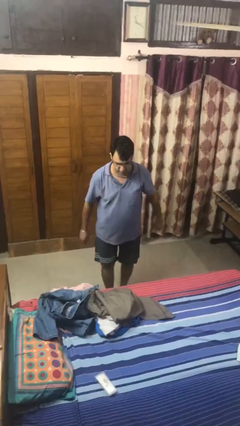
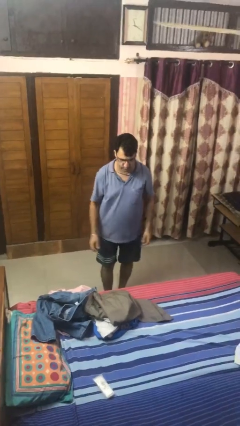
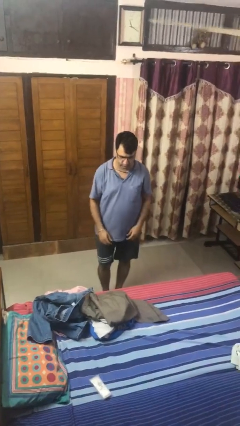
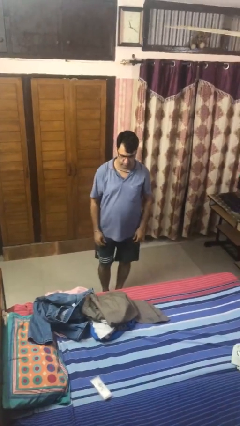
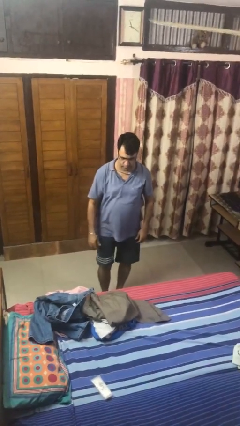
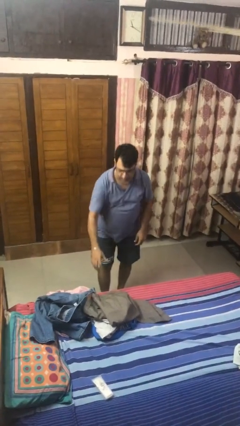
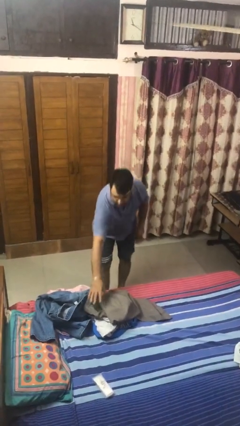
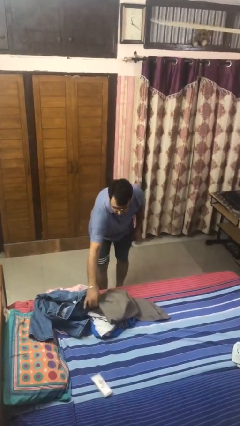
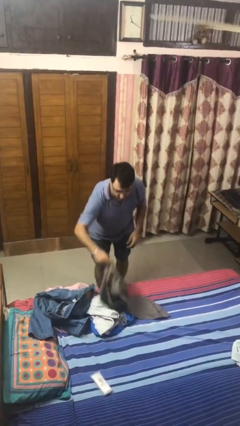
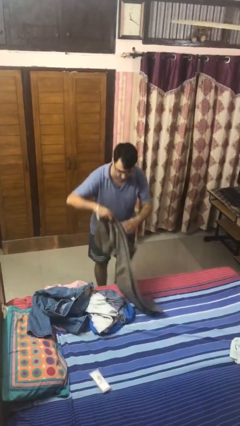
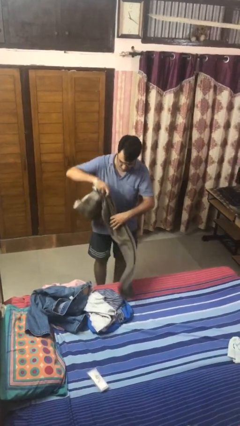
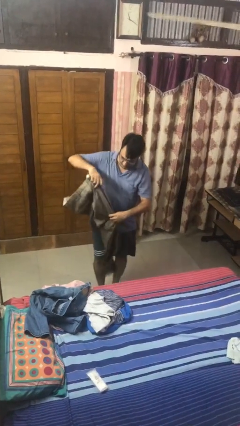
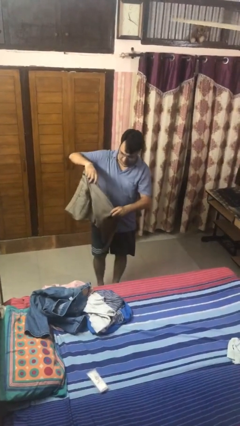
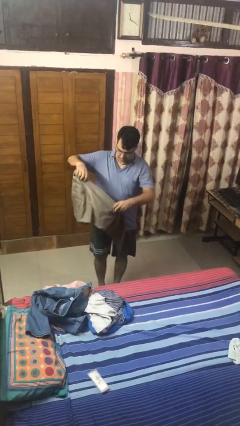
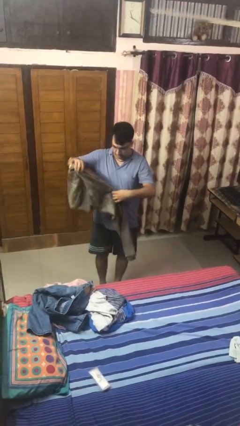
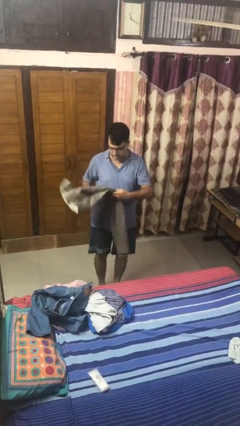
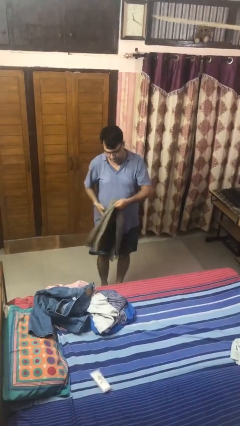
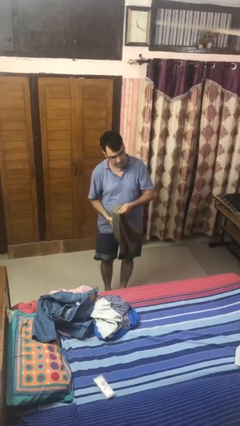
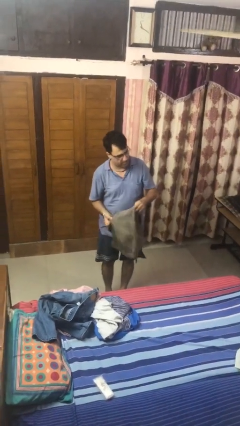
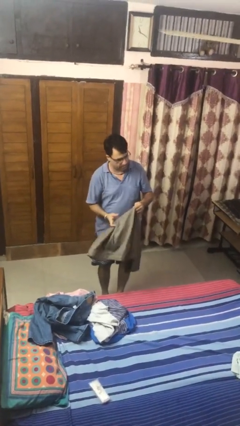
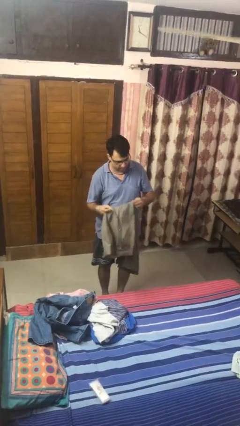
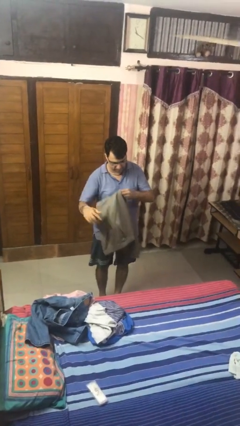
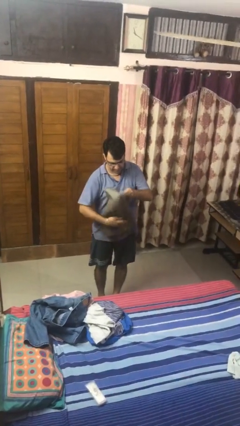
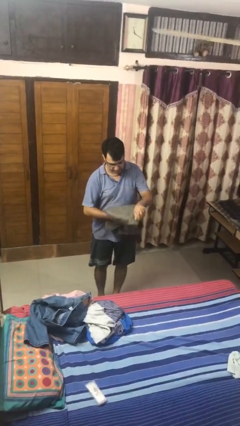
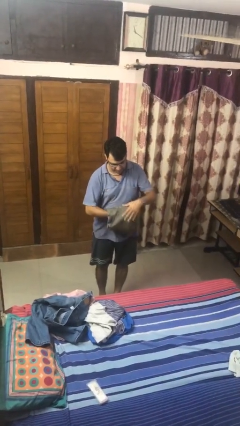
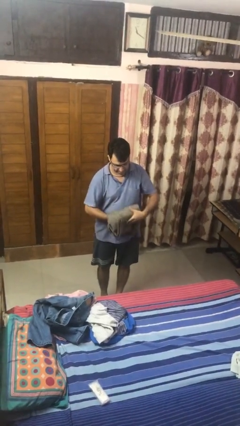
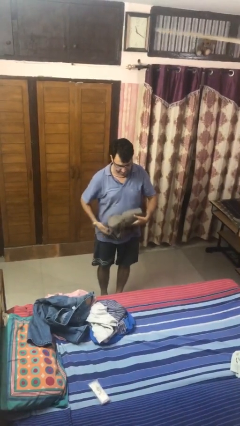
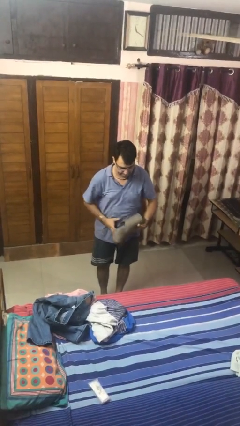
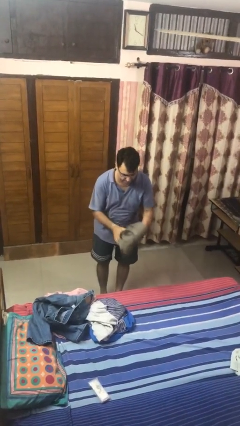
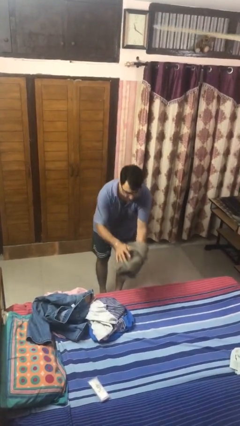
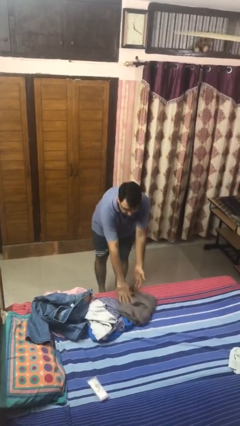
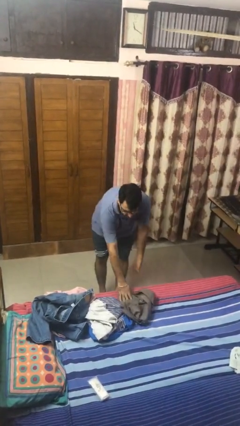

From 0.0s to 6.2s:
person folds pants

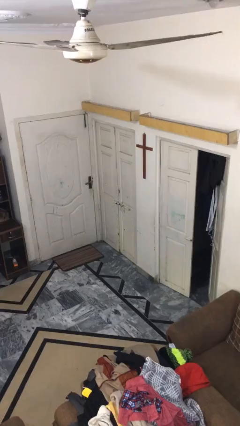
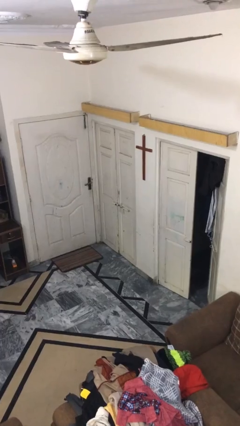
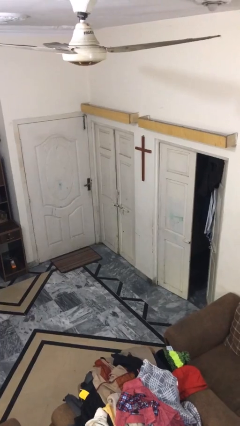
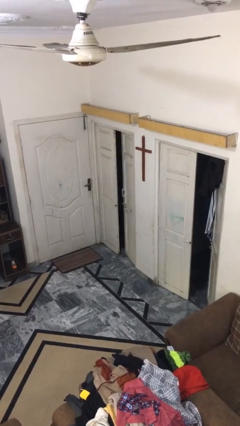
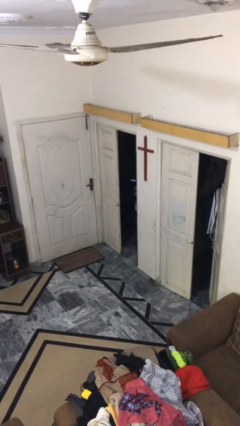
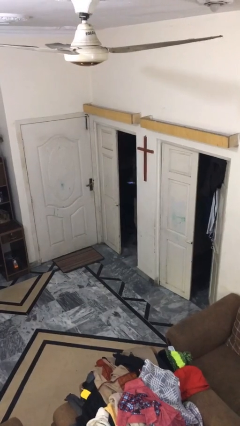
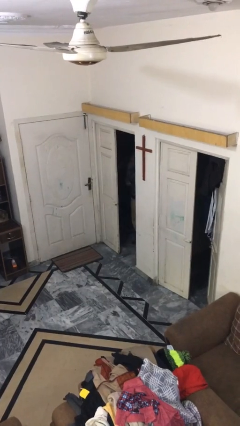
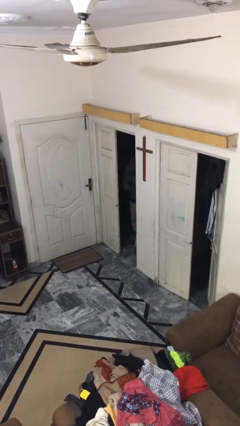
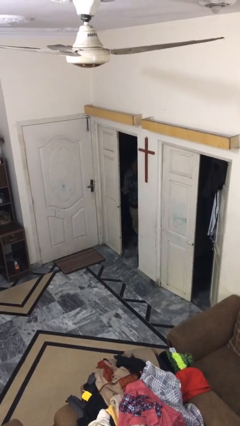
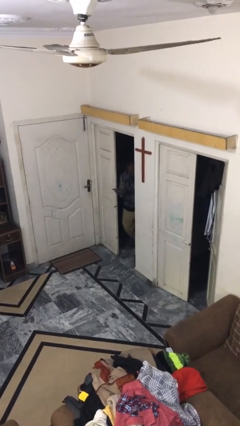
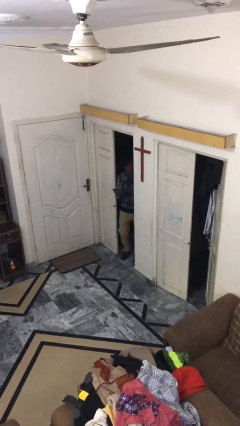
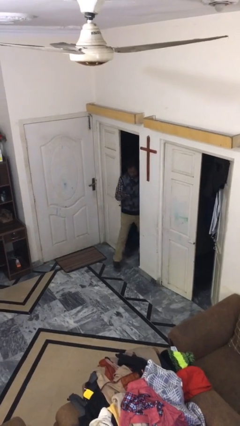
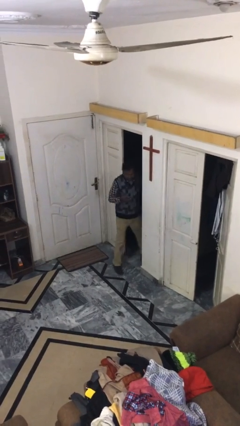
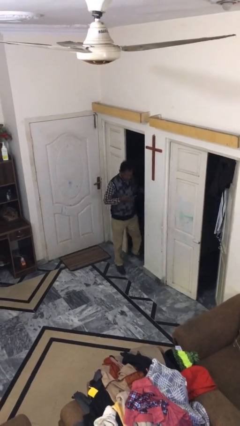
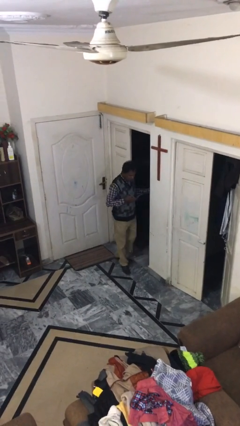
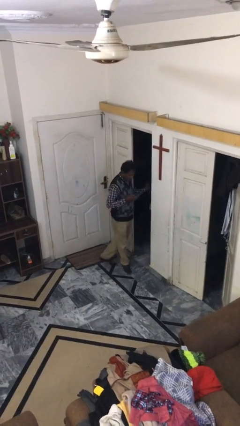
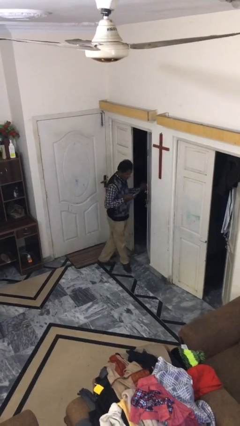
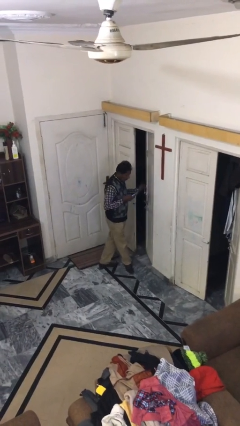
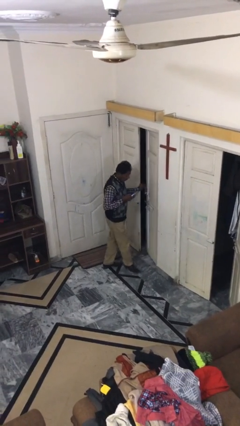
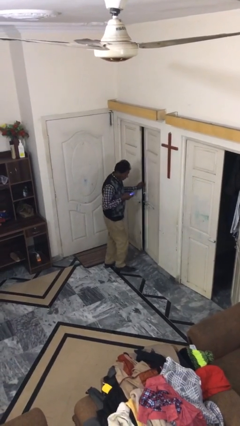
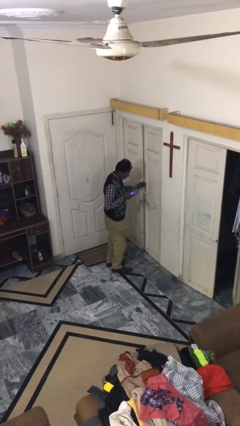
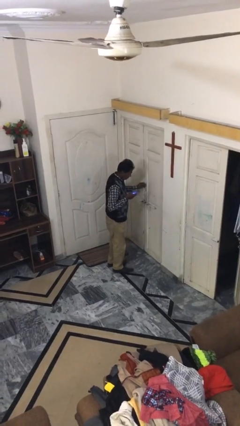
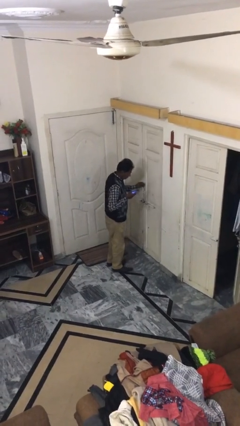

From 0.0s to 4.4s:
person enters scene through structure

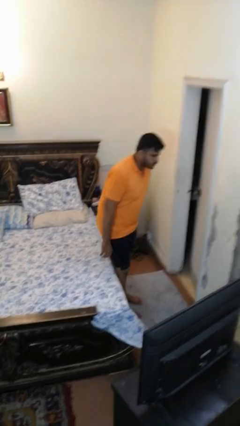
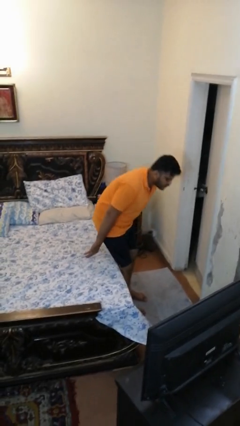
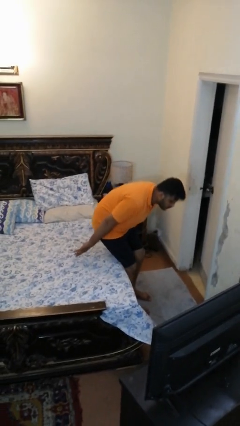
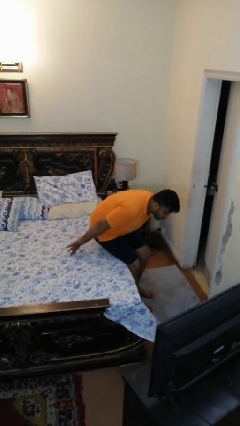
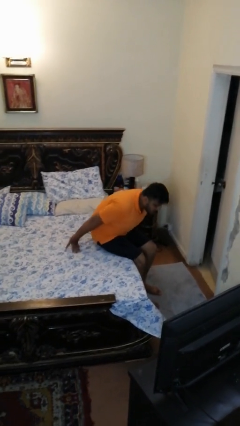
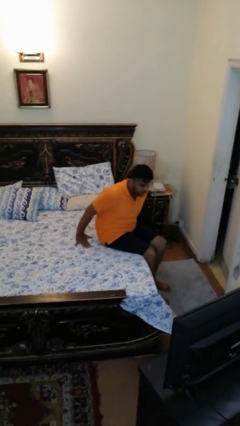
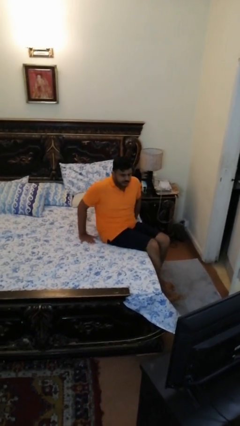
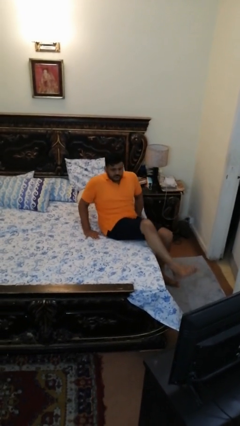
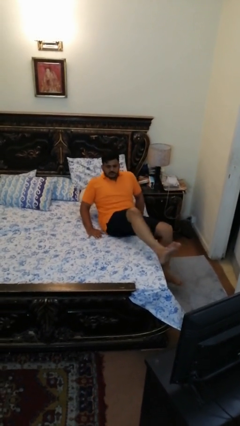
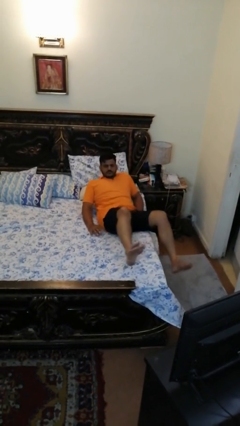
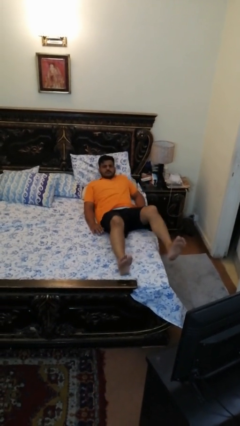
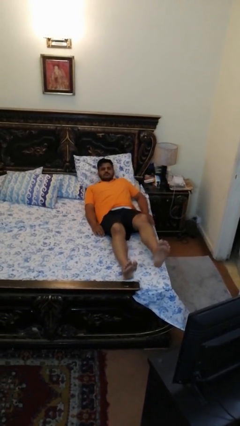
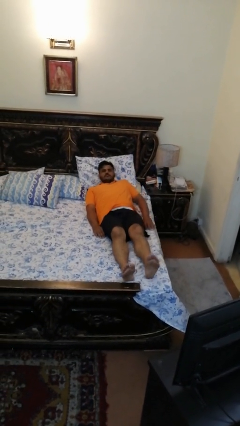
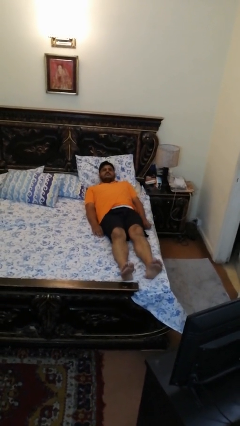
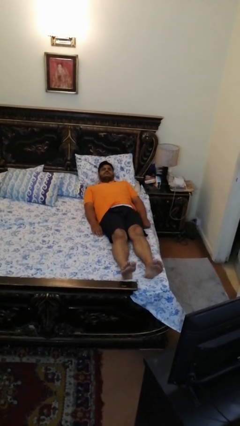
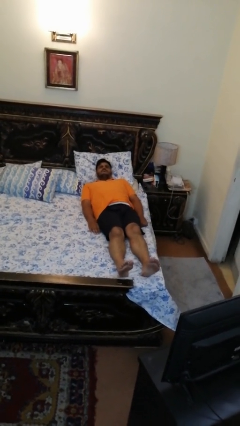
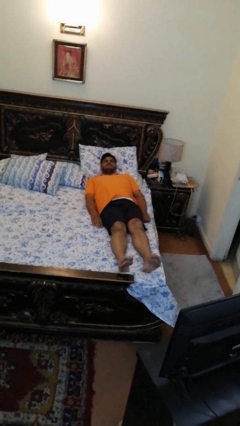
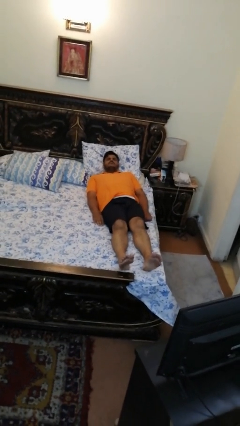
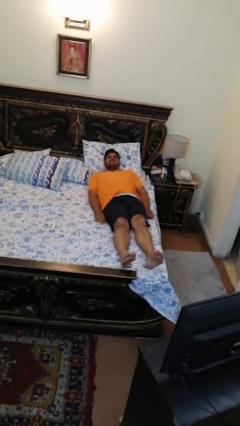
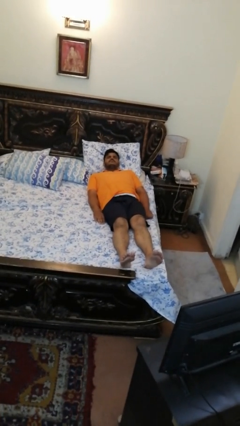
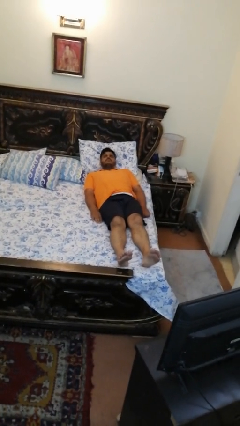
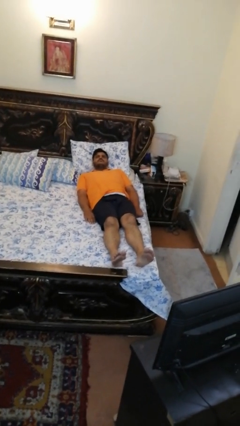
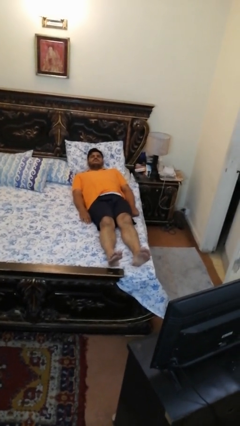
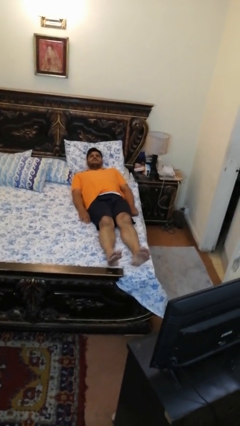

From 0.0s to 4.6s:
person lies down on bed

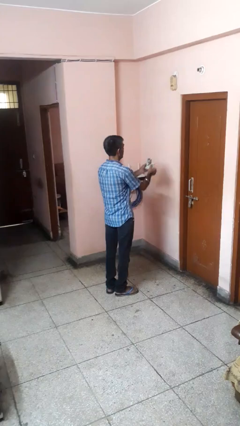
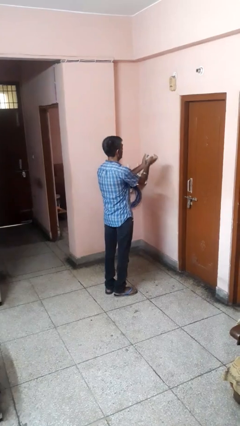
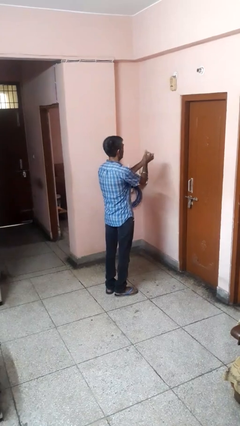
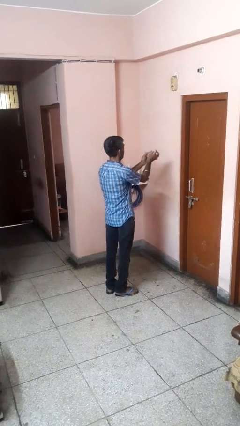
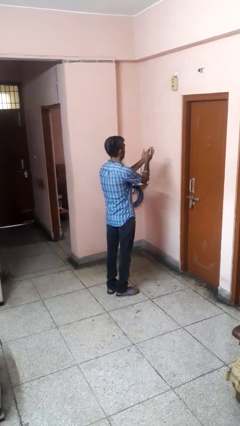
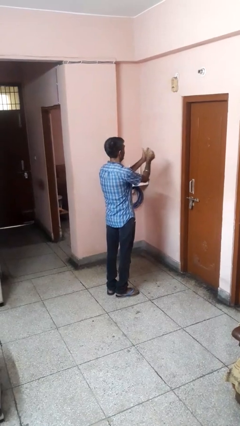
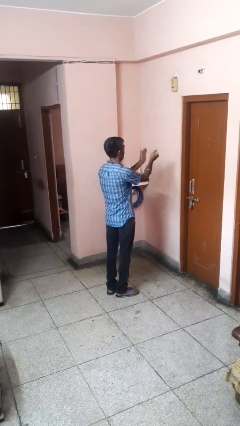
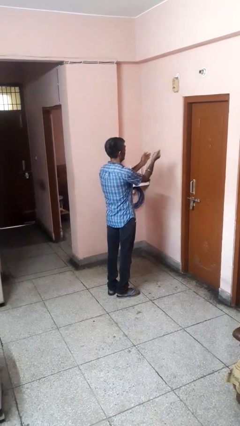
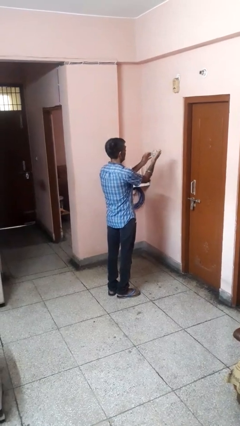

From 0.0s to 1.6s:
person crumples paper

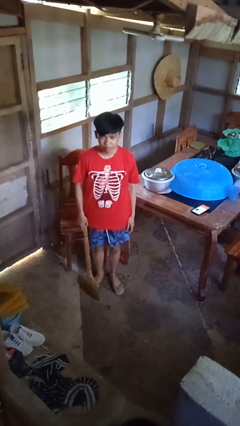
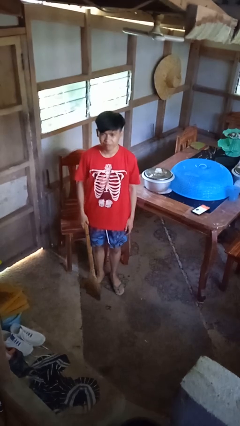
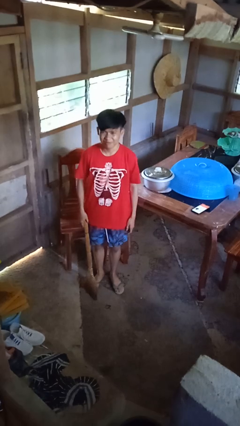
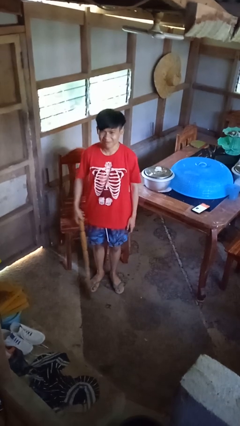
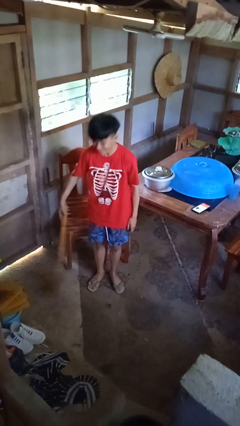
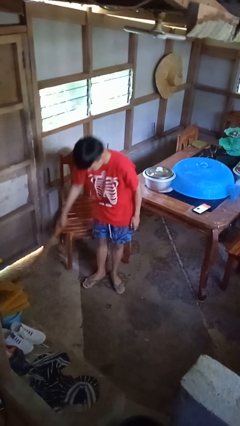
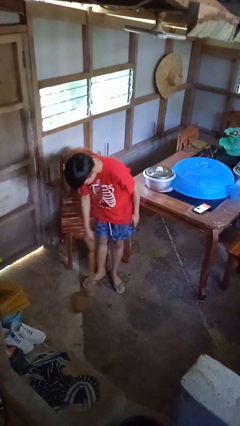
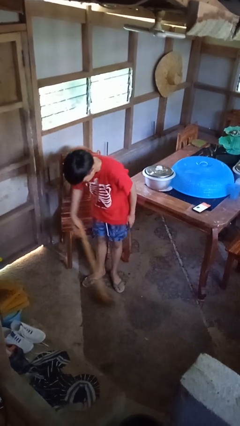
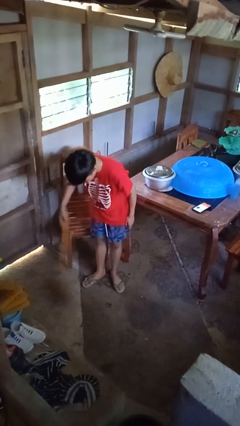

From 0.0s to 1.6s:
person sweeps floor
